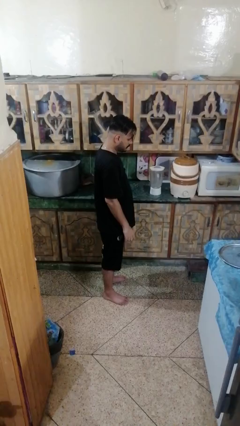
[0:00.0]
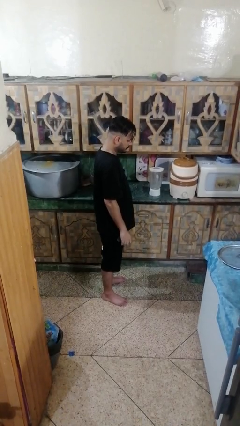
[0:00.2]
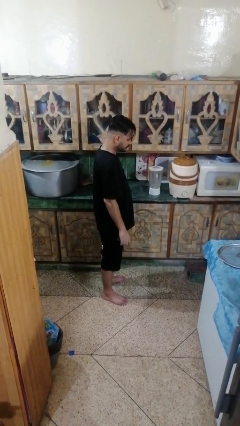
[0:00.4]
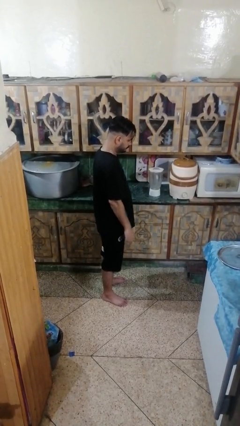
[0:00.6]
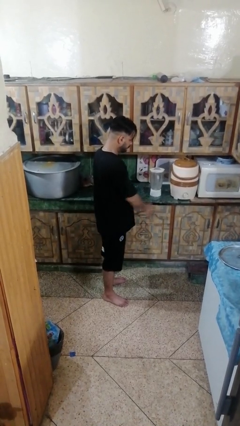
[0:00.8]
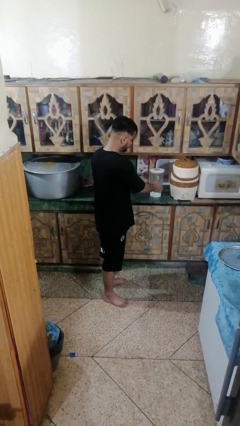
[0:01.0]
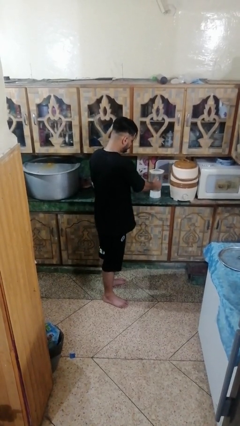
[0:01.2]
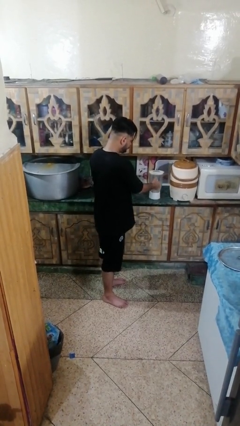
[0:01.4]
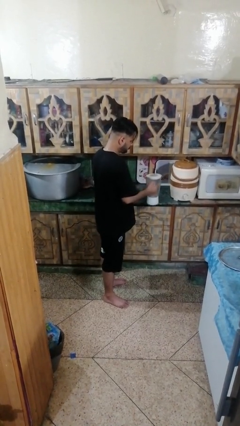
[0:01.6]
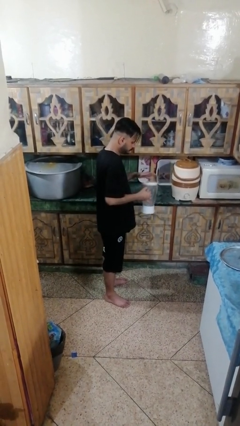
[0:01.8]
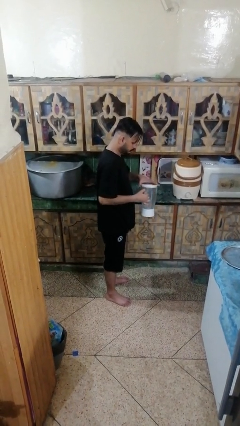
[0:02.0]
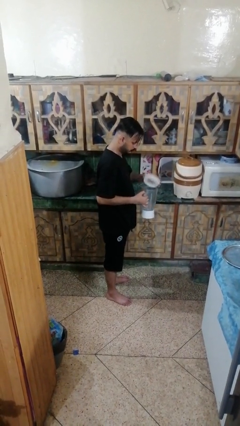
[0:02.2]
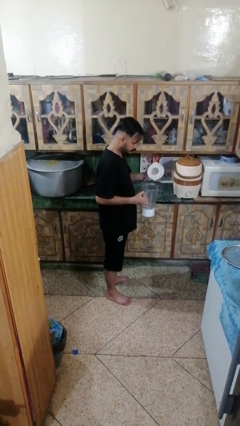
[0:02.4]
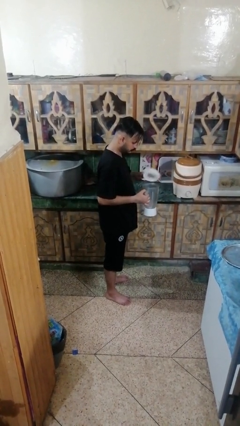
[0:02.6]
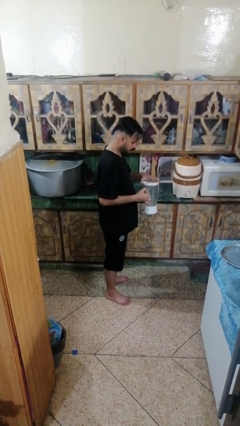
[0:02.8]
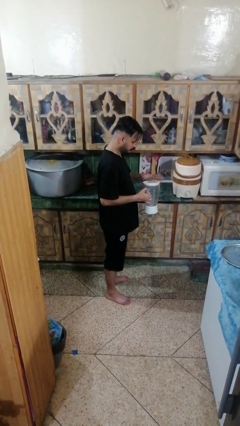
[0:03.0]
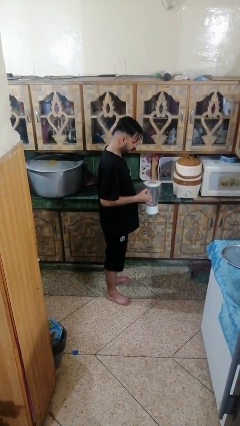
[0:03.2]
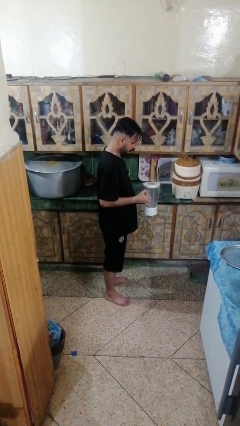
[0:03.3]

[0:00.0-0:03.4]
person picks up object from countertop

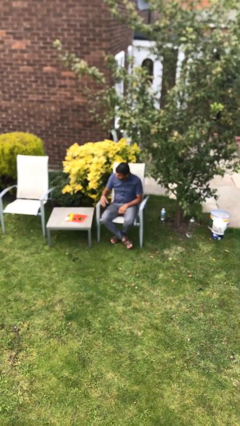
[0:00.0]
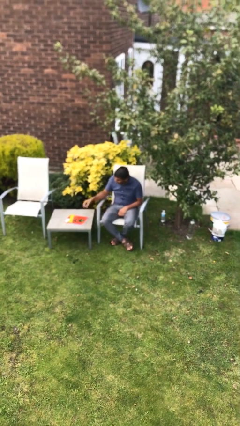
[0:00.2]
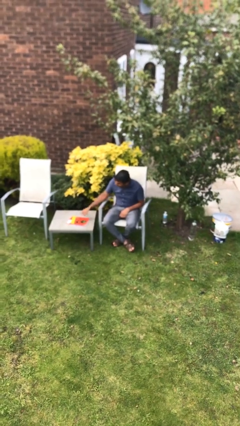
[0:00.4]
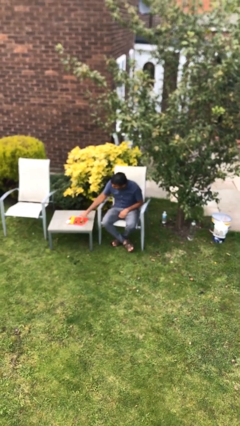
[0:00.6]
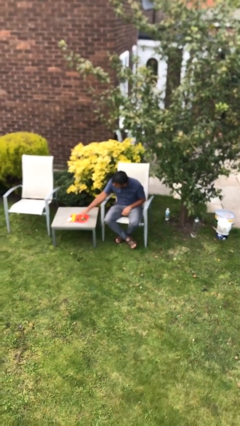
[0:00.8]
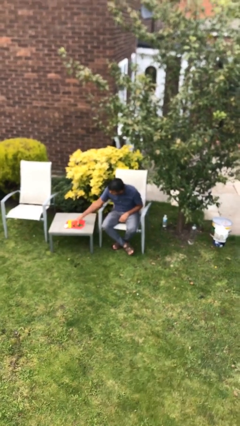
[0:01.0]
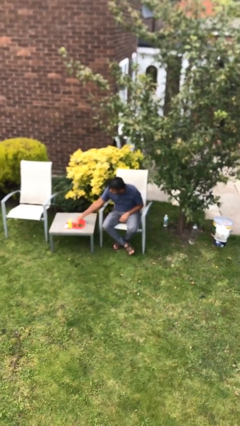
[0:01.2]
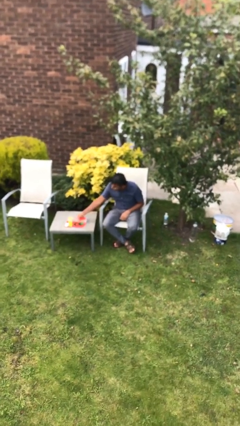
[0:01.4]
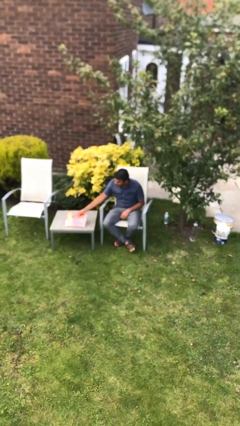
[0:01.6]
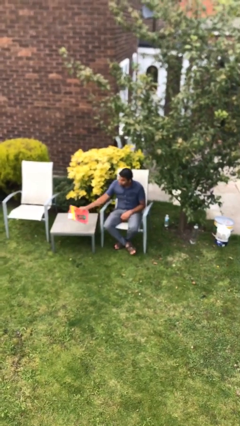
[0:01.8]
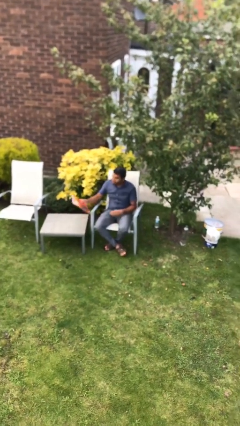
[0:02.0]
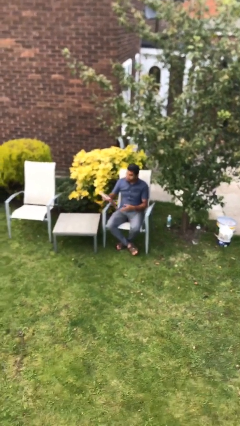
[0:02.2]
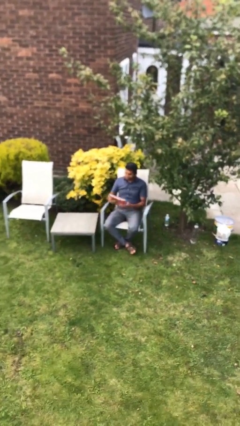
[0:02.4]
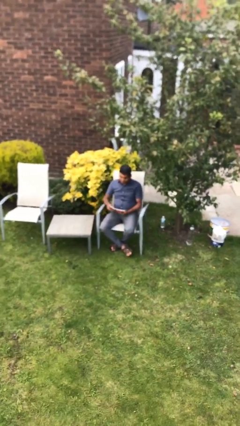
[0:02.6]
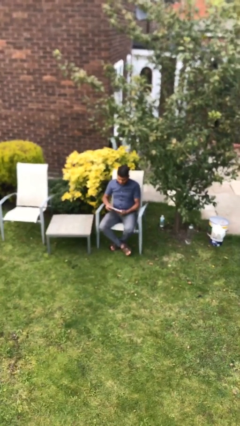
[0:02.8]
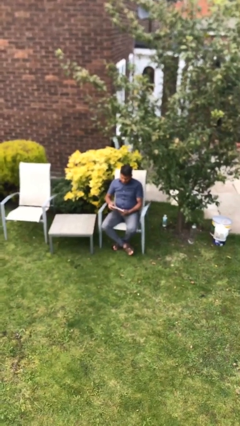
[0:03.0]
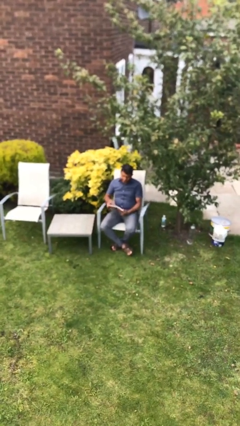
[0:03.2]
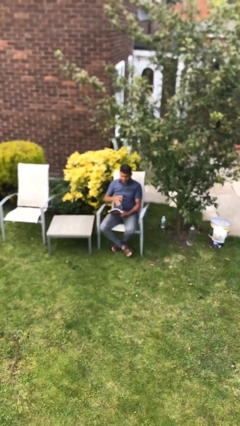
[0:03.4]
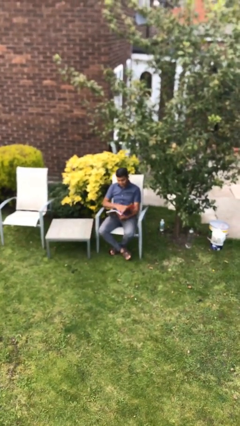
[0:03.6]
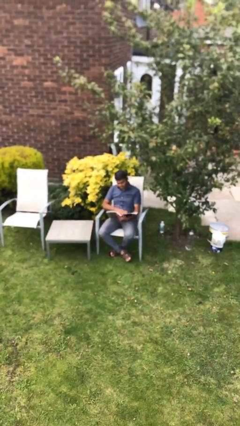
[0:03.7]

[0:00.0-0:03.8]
person picks up object from table

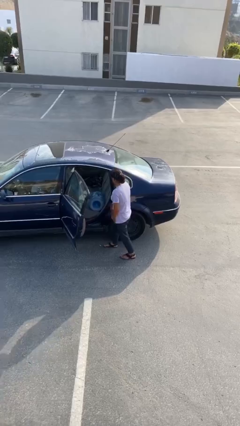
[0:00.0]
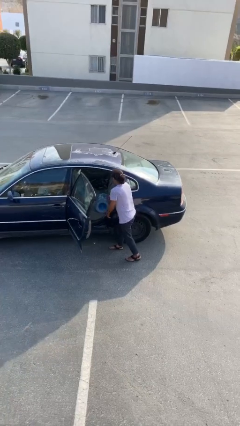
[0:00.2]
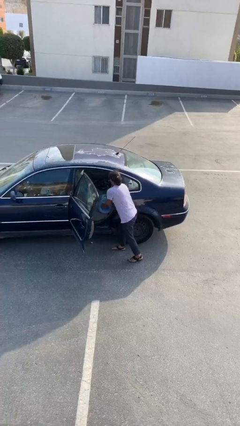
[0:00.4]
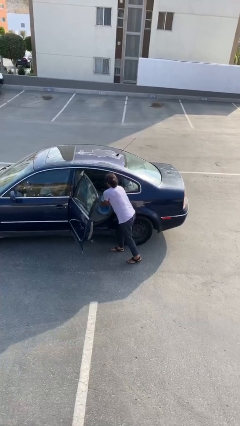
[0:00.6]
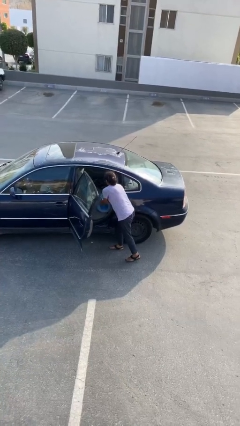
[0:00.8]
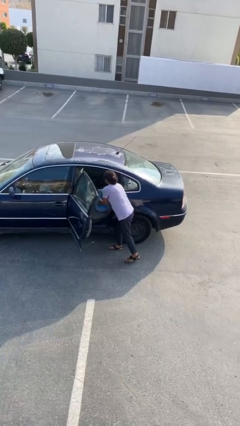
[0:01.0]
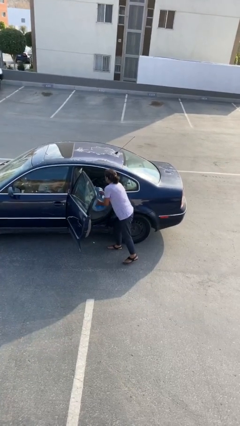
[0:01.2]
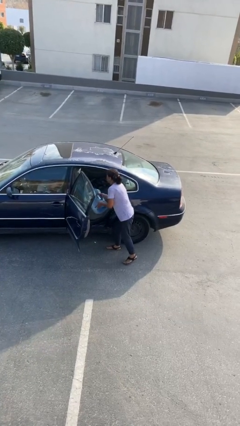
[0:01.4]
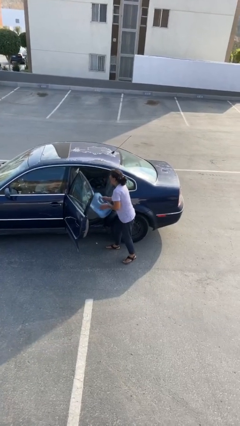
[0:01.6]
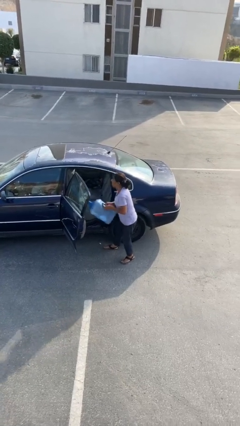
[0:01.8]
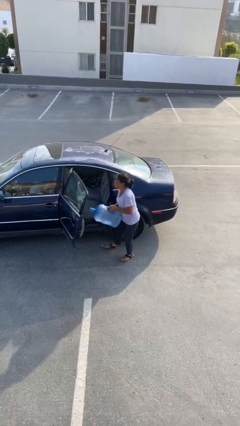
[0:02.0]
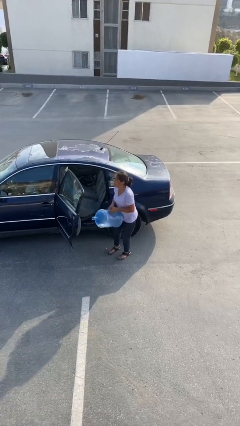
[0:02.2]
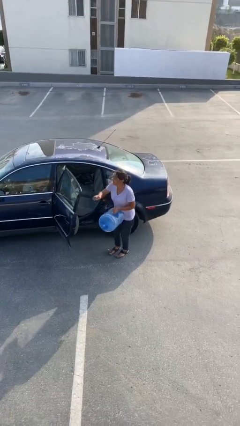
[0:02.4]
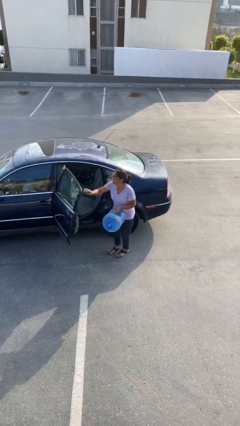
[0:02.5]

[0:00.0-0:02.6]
person unloads car

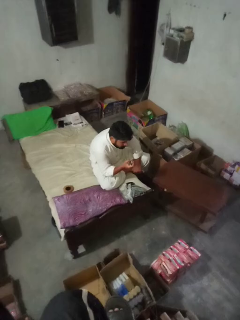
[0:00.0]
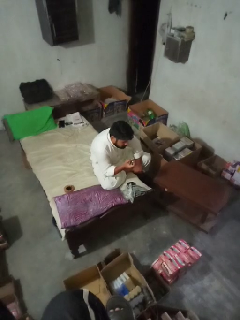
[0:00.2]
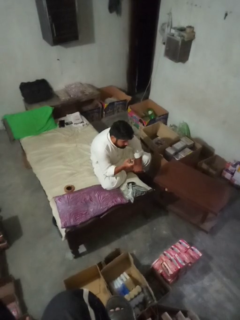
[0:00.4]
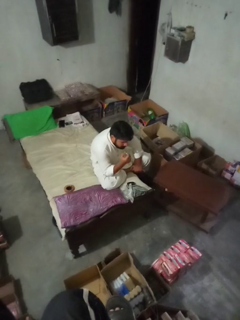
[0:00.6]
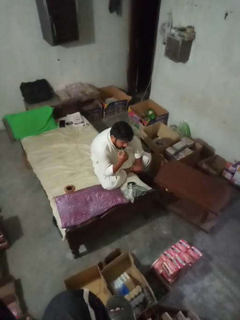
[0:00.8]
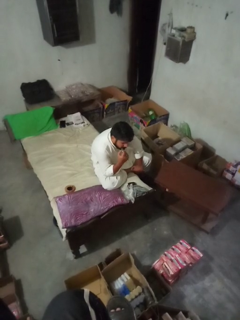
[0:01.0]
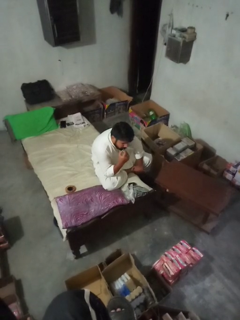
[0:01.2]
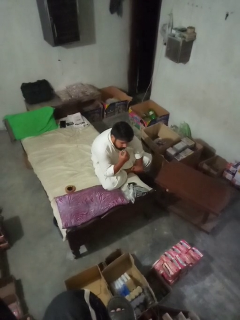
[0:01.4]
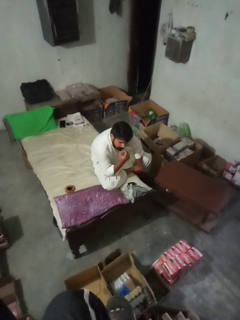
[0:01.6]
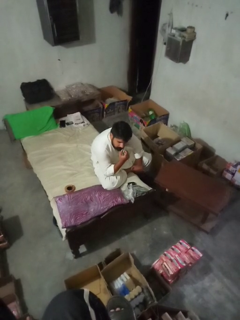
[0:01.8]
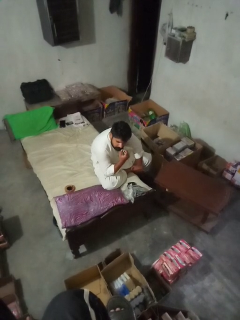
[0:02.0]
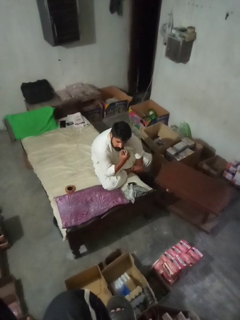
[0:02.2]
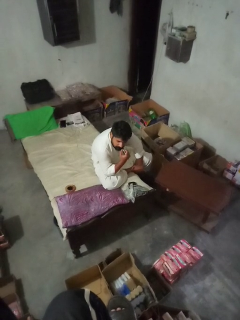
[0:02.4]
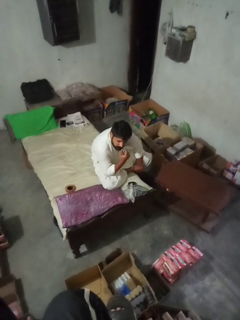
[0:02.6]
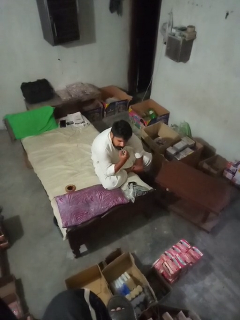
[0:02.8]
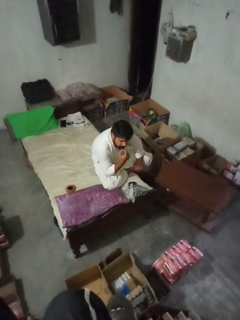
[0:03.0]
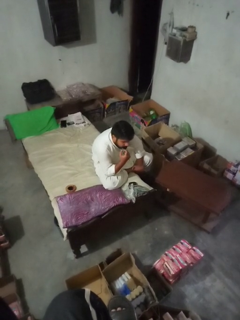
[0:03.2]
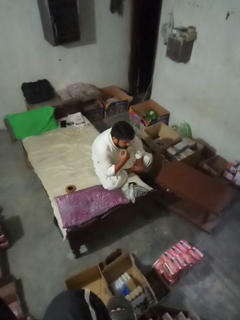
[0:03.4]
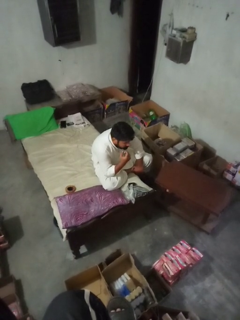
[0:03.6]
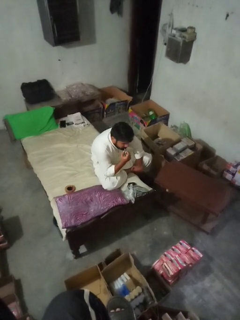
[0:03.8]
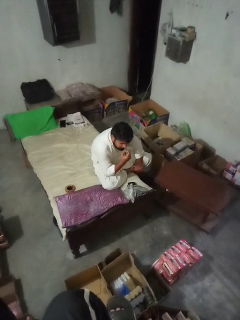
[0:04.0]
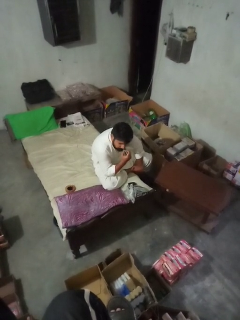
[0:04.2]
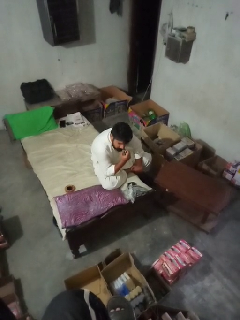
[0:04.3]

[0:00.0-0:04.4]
person applies lip makeup

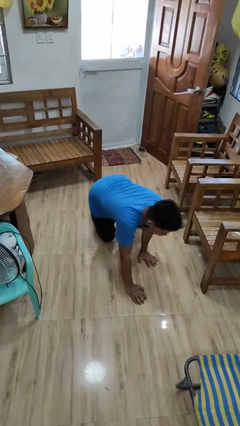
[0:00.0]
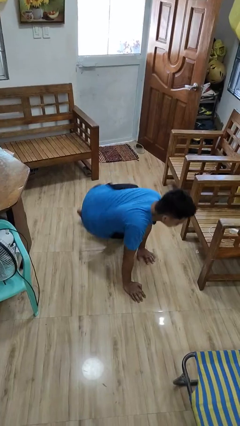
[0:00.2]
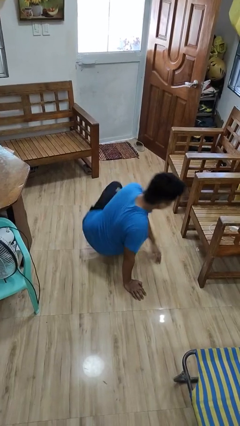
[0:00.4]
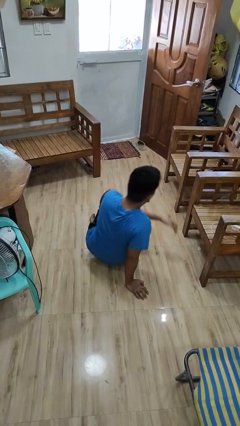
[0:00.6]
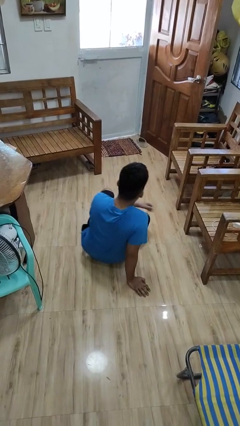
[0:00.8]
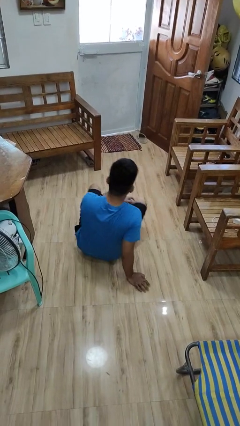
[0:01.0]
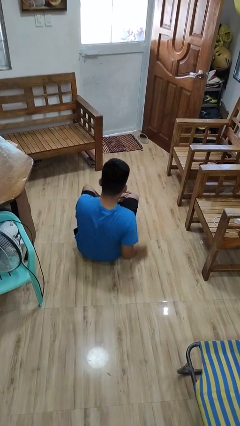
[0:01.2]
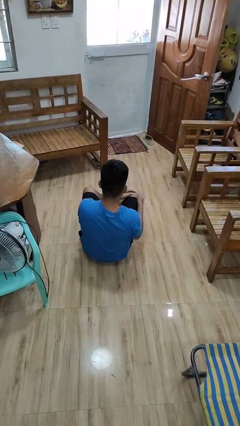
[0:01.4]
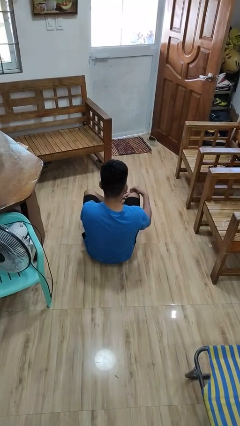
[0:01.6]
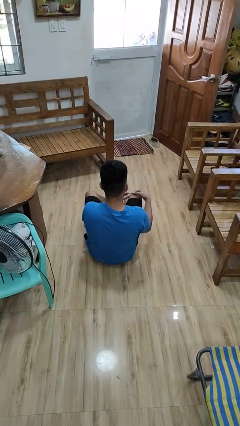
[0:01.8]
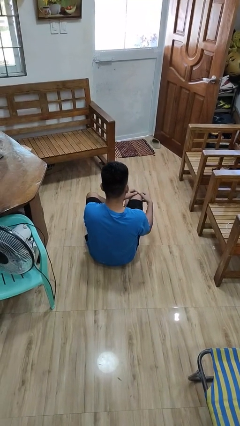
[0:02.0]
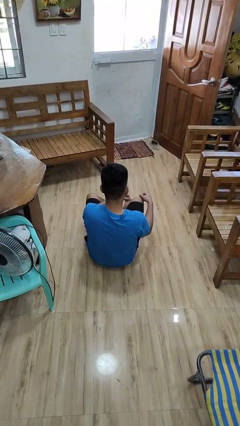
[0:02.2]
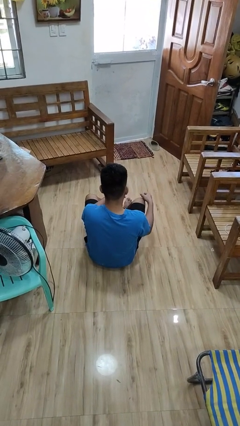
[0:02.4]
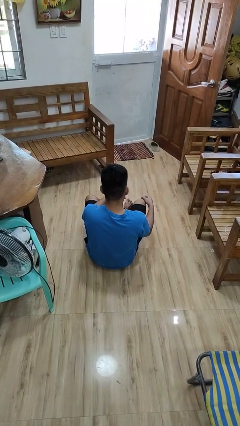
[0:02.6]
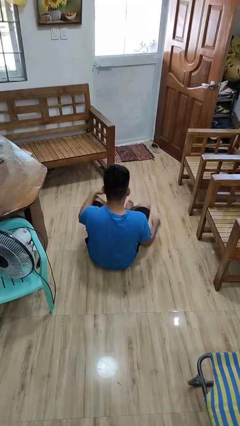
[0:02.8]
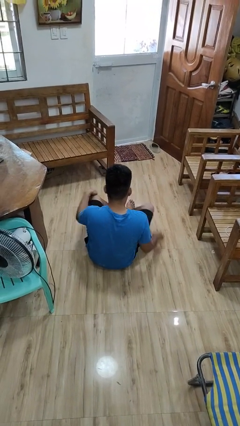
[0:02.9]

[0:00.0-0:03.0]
person lies down on floor

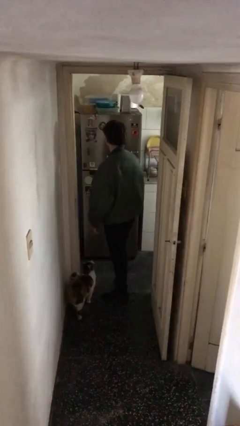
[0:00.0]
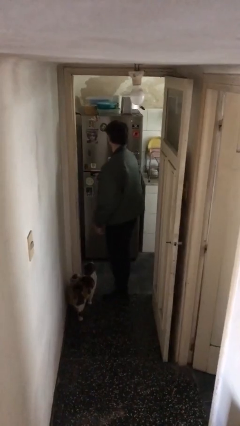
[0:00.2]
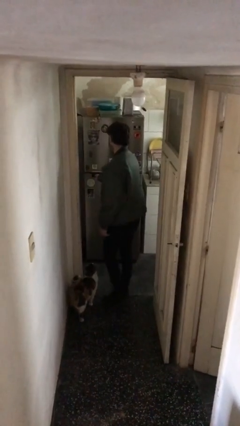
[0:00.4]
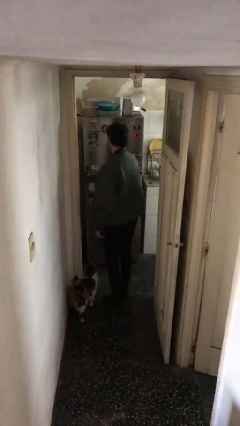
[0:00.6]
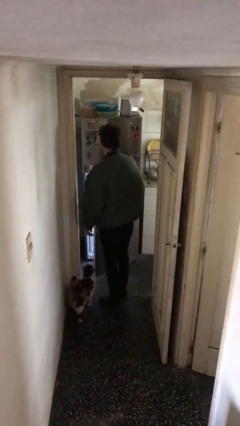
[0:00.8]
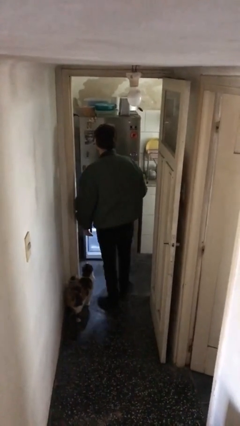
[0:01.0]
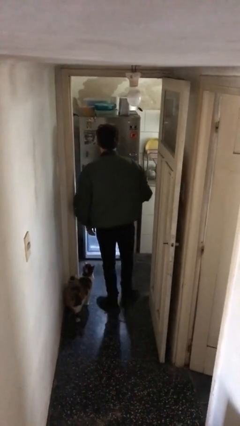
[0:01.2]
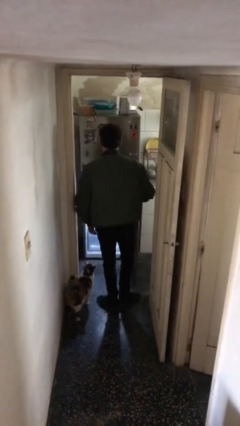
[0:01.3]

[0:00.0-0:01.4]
person opens refrigerator
